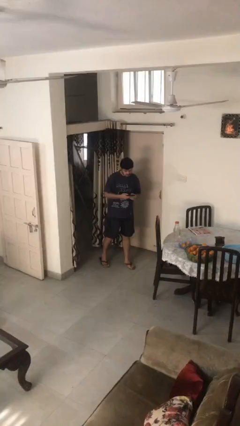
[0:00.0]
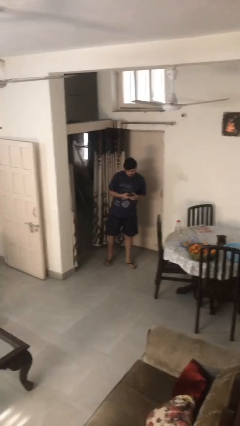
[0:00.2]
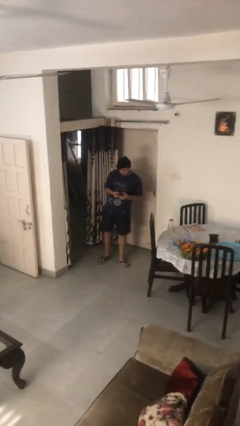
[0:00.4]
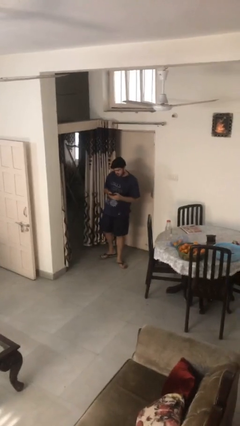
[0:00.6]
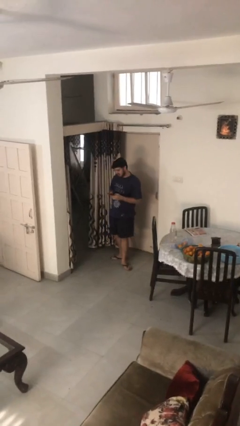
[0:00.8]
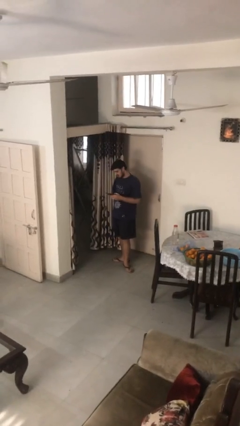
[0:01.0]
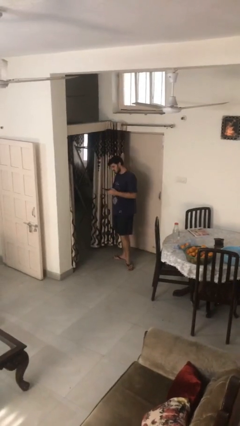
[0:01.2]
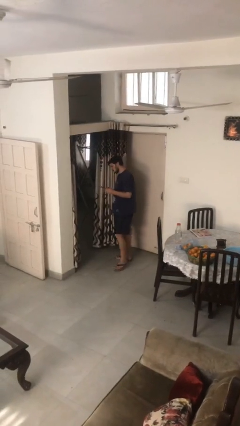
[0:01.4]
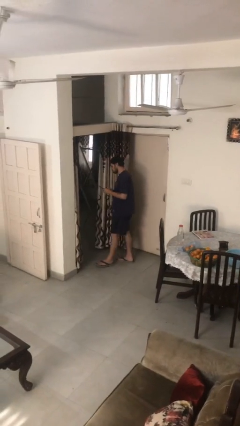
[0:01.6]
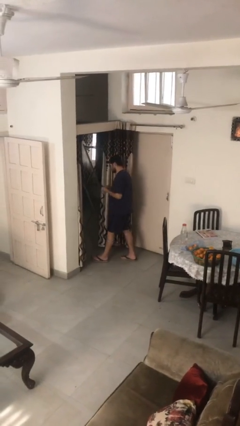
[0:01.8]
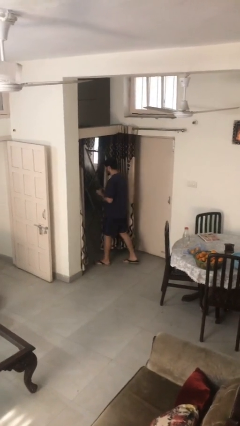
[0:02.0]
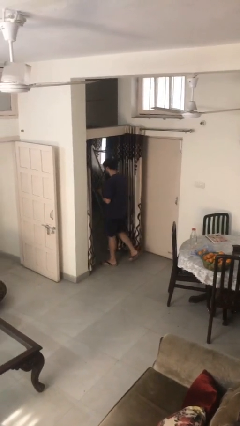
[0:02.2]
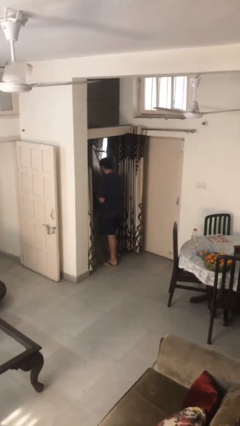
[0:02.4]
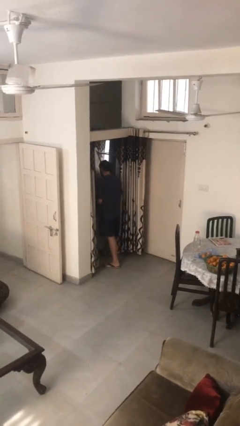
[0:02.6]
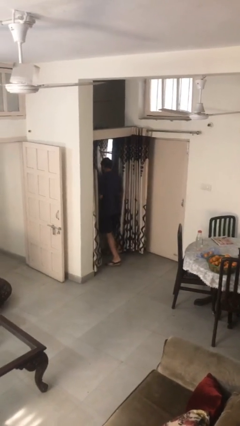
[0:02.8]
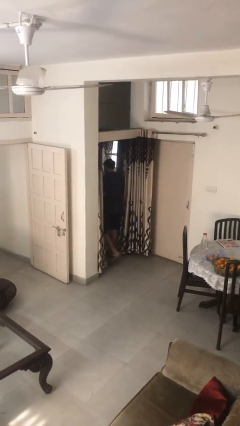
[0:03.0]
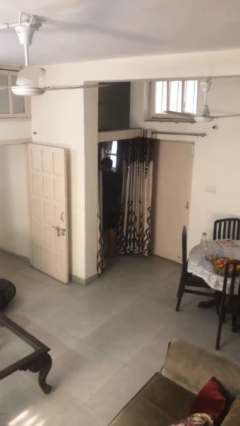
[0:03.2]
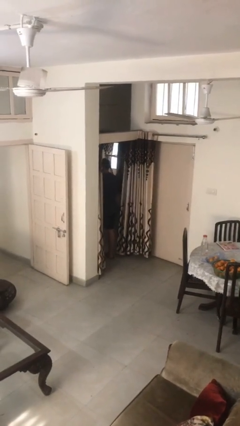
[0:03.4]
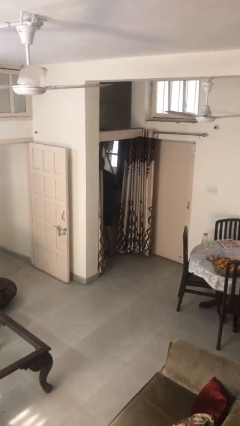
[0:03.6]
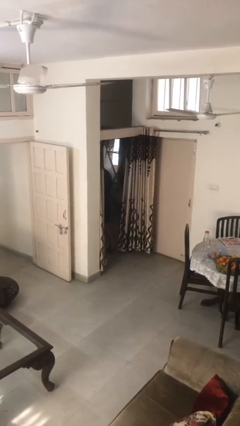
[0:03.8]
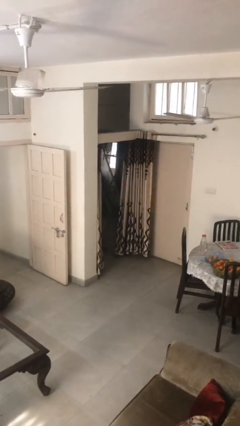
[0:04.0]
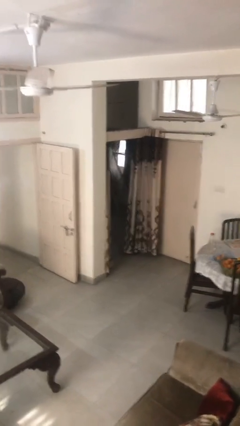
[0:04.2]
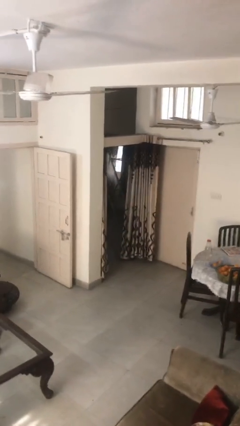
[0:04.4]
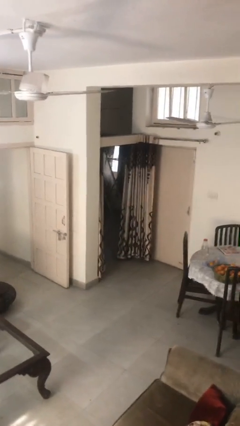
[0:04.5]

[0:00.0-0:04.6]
person exits scene through structure

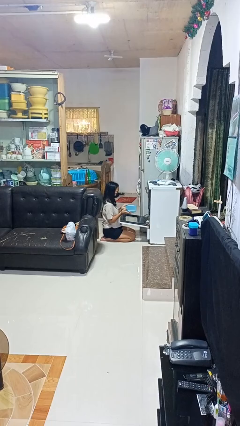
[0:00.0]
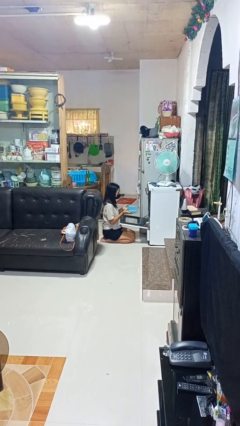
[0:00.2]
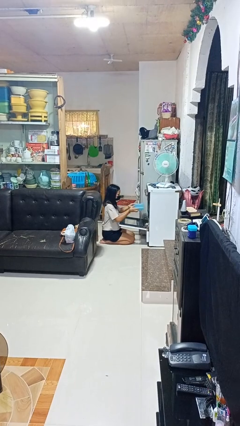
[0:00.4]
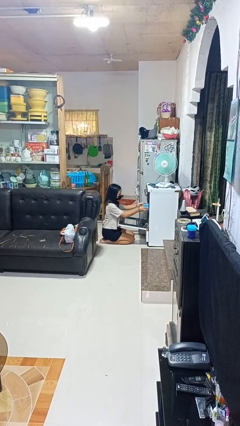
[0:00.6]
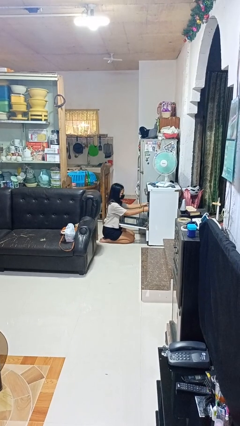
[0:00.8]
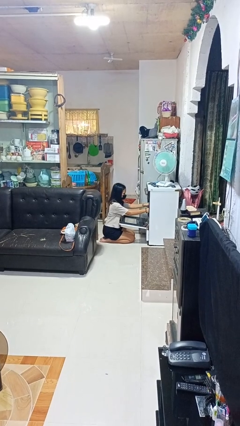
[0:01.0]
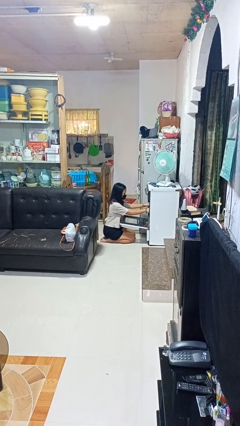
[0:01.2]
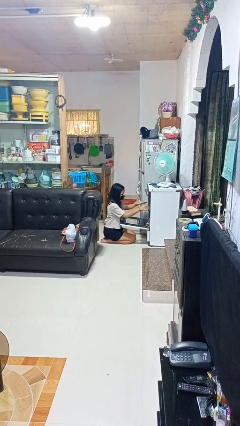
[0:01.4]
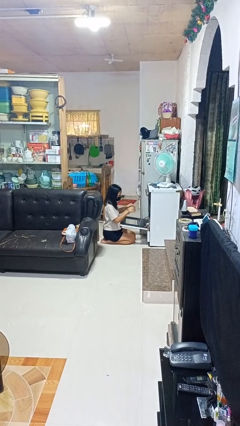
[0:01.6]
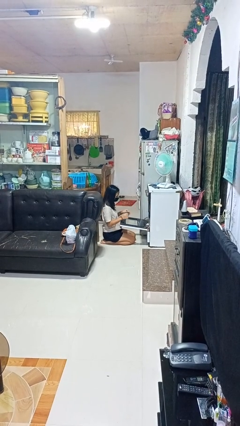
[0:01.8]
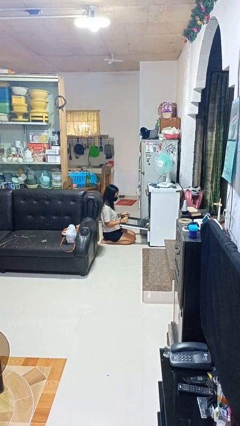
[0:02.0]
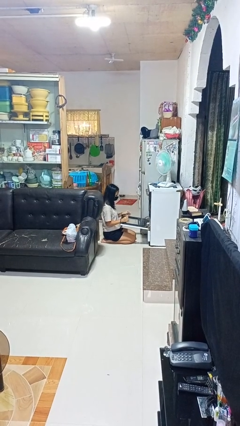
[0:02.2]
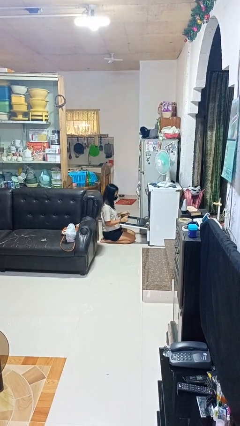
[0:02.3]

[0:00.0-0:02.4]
person puts object into oven

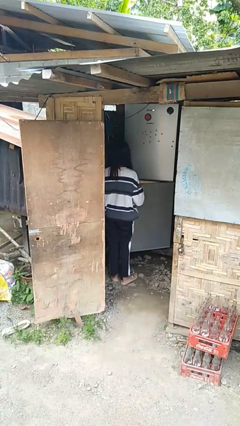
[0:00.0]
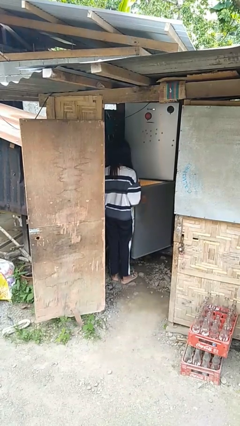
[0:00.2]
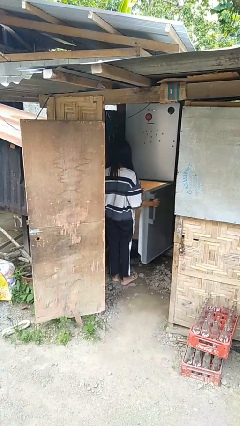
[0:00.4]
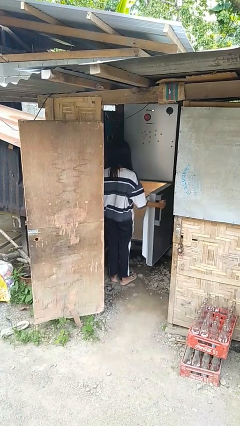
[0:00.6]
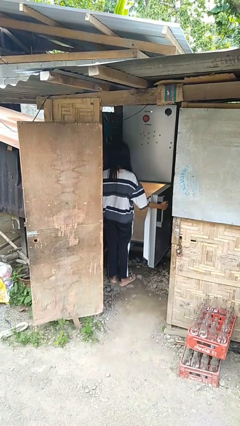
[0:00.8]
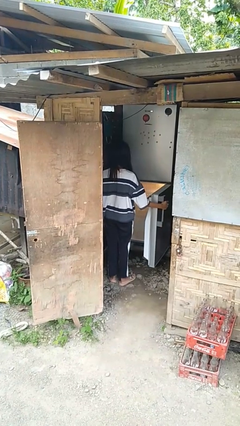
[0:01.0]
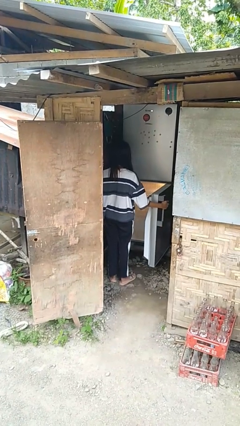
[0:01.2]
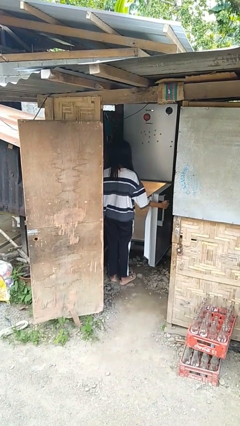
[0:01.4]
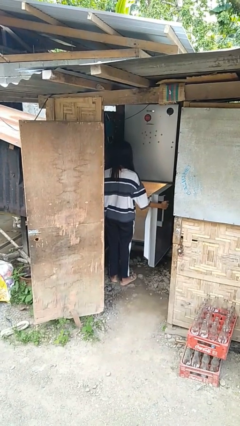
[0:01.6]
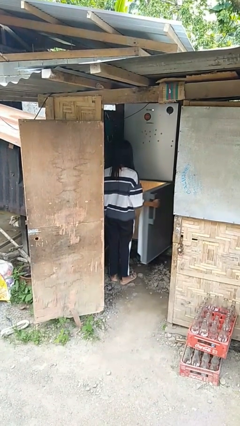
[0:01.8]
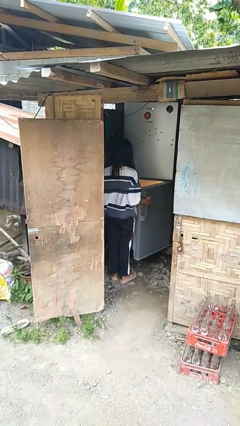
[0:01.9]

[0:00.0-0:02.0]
person opens refrigerator

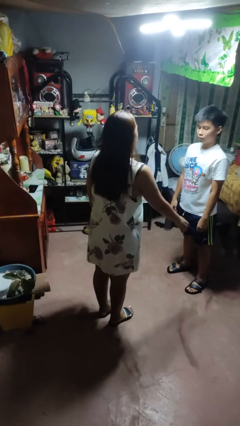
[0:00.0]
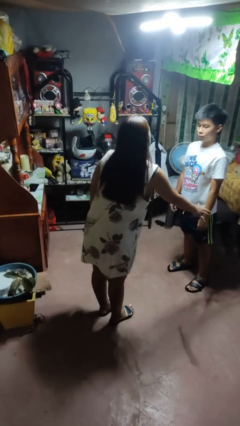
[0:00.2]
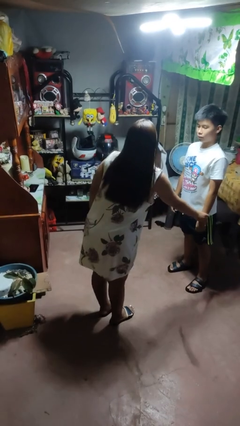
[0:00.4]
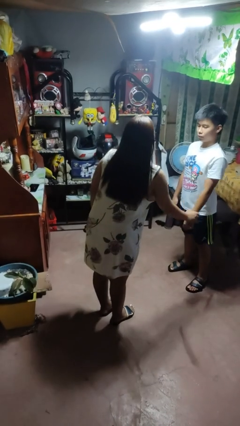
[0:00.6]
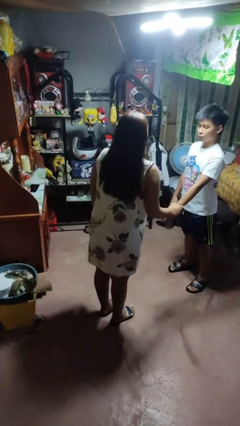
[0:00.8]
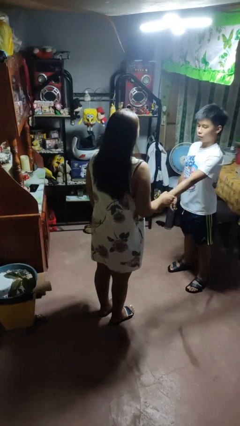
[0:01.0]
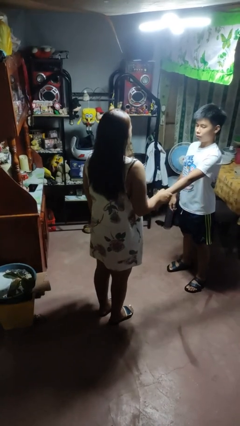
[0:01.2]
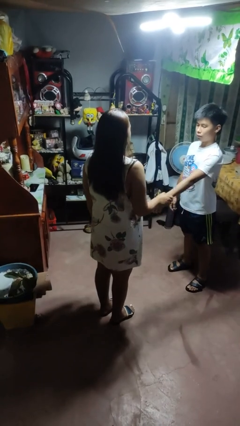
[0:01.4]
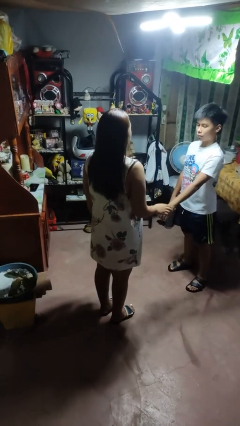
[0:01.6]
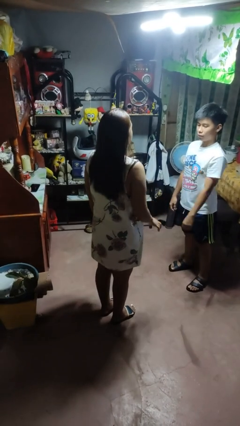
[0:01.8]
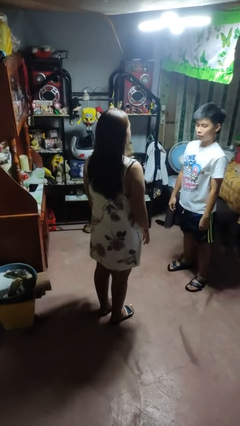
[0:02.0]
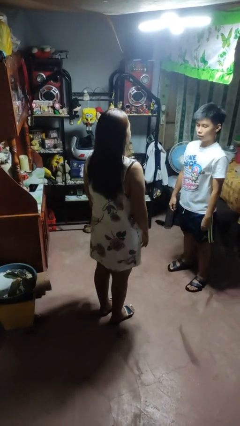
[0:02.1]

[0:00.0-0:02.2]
person grabs person by forearm

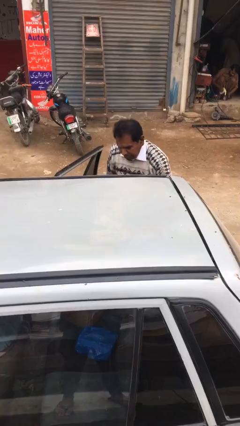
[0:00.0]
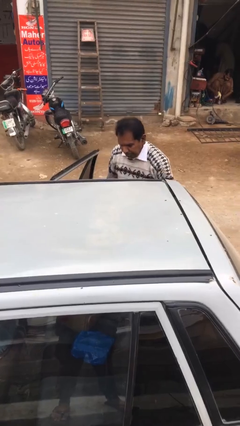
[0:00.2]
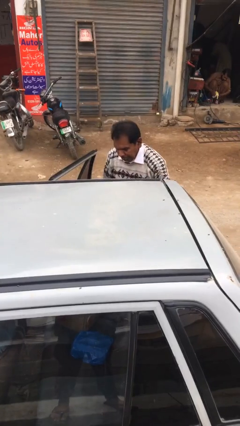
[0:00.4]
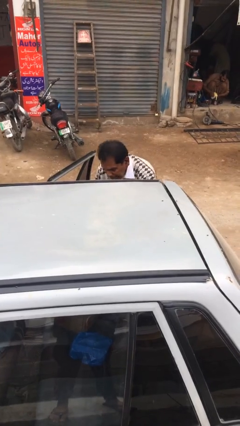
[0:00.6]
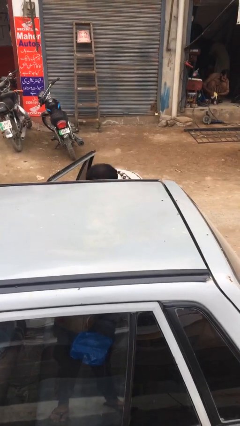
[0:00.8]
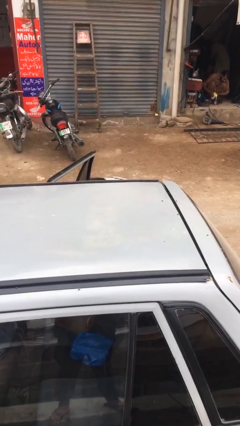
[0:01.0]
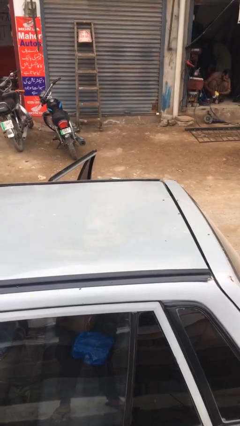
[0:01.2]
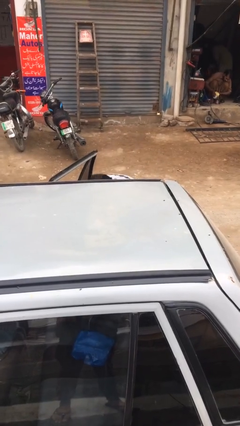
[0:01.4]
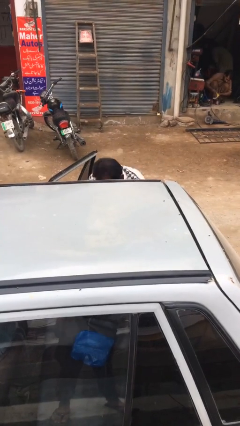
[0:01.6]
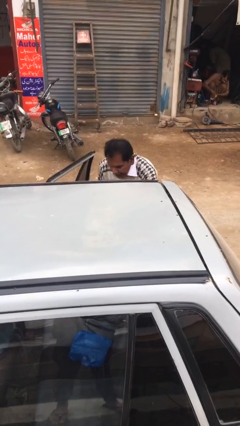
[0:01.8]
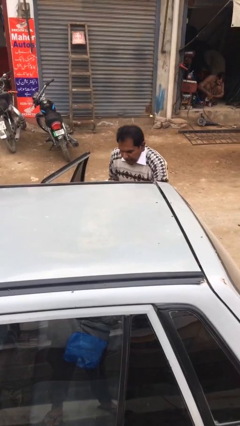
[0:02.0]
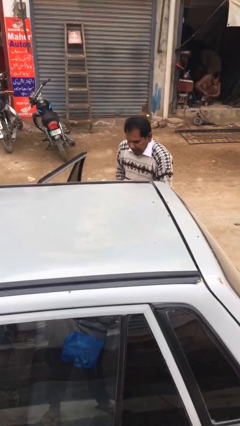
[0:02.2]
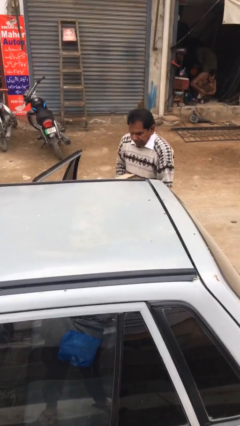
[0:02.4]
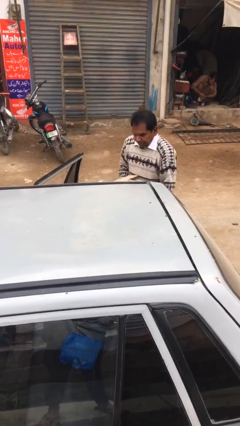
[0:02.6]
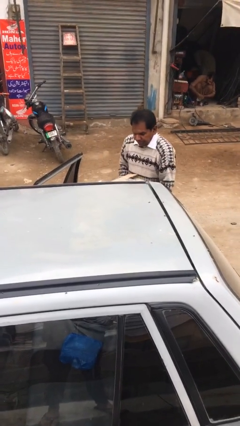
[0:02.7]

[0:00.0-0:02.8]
person unloads car

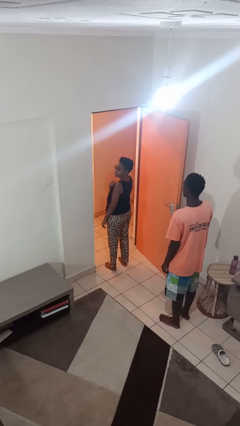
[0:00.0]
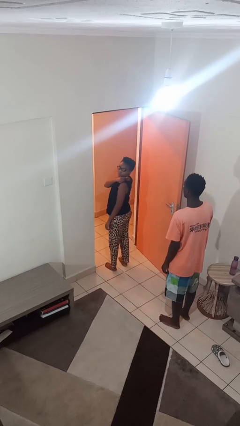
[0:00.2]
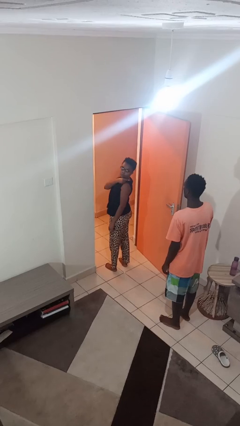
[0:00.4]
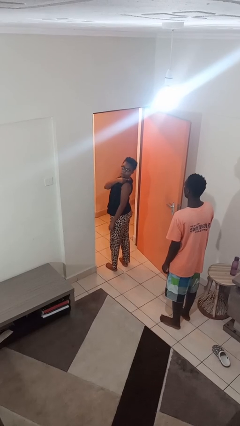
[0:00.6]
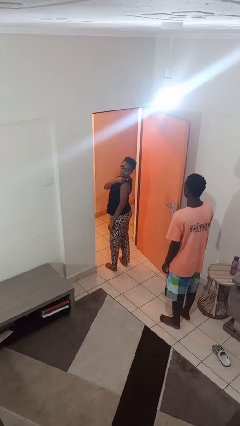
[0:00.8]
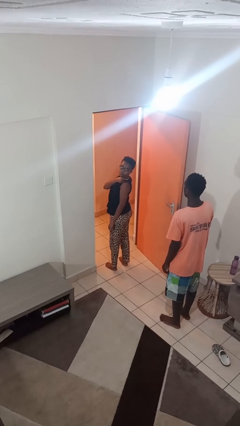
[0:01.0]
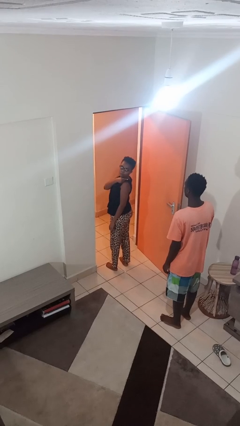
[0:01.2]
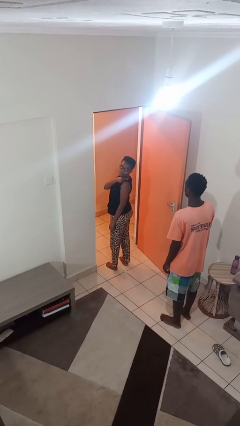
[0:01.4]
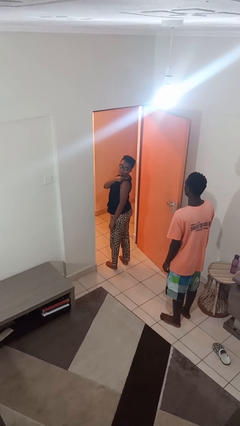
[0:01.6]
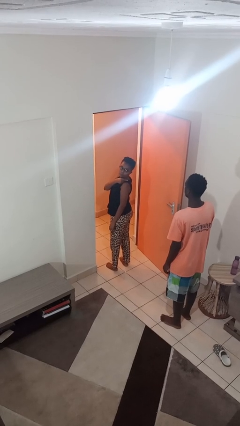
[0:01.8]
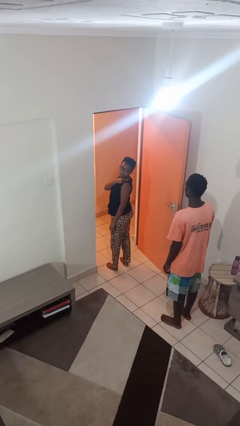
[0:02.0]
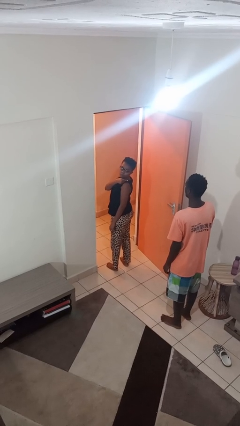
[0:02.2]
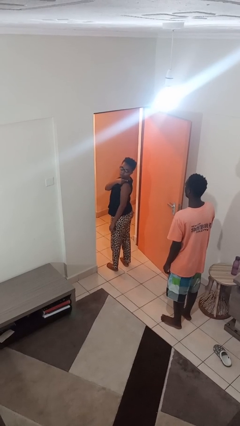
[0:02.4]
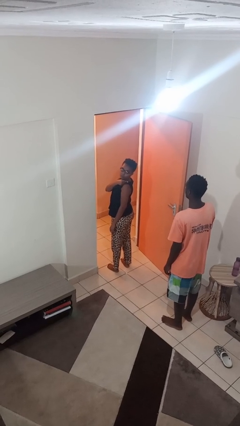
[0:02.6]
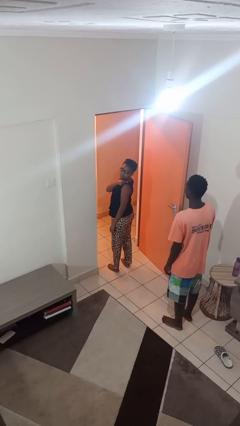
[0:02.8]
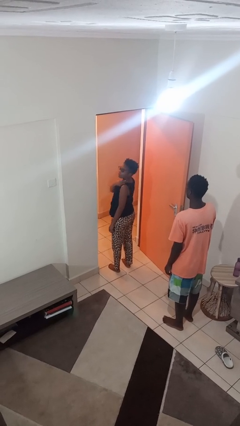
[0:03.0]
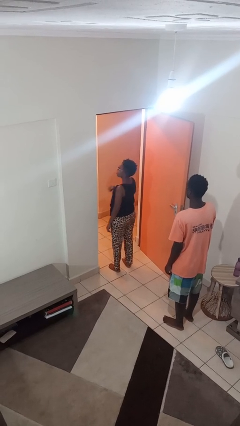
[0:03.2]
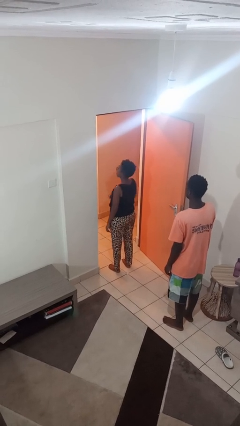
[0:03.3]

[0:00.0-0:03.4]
person looks over shoulder
